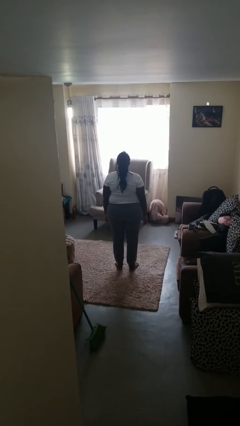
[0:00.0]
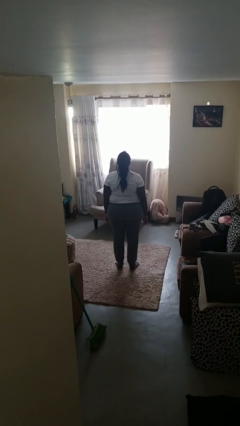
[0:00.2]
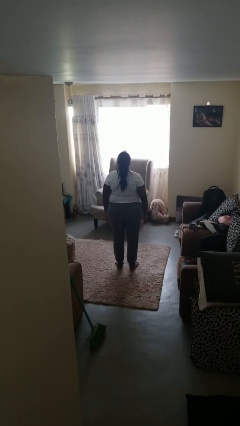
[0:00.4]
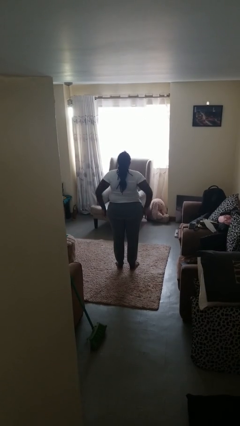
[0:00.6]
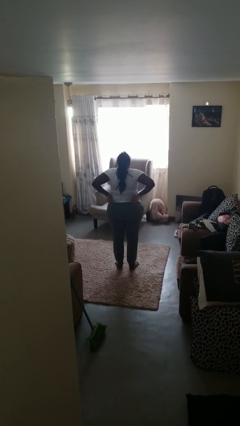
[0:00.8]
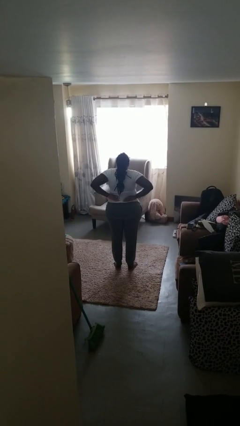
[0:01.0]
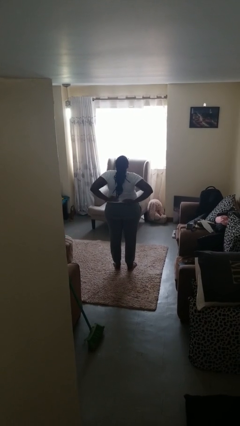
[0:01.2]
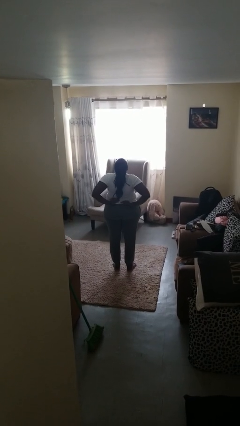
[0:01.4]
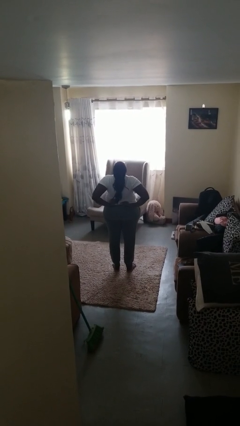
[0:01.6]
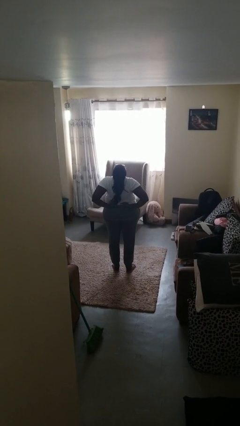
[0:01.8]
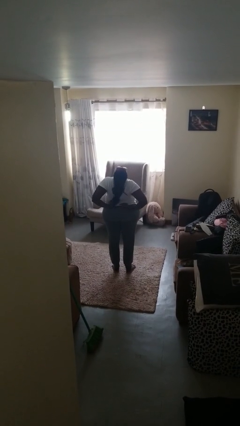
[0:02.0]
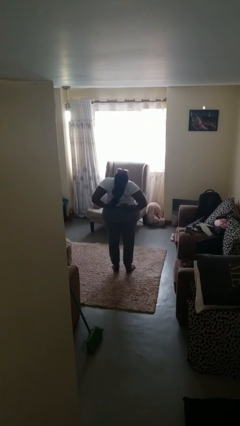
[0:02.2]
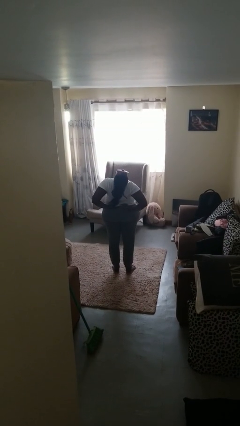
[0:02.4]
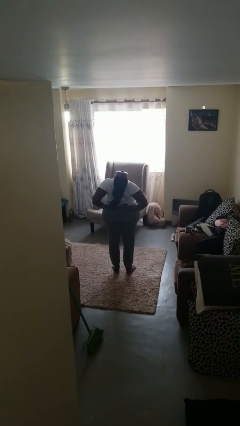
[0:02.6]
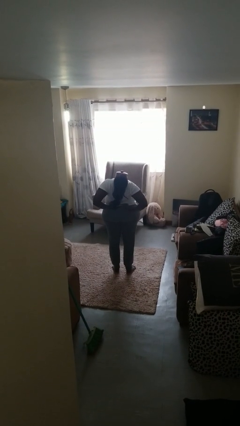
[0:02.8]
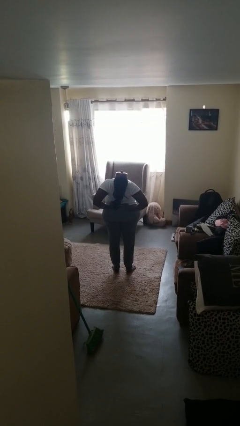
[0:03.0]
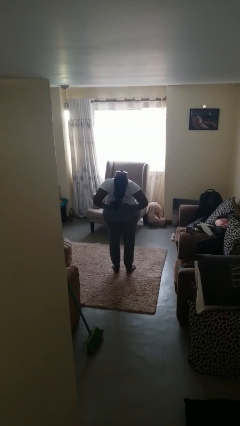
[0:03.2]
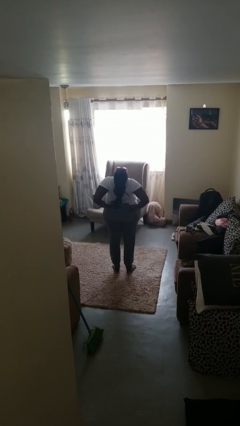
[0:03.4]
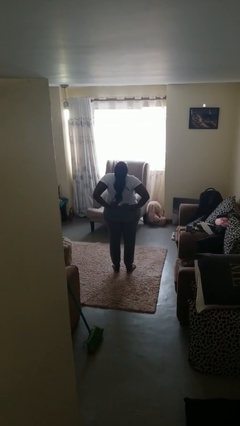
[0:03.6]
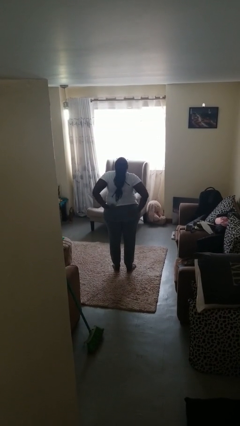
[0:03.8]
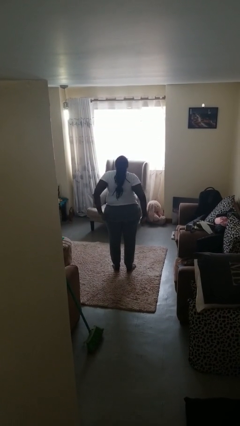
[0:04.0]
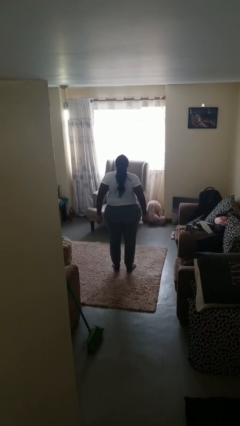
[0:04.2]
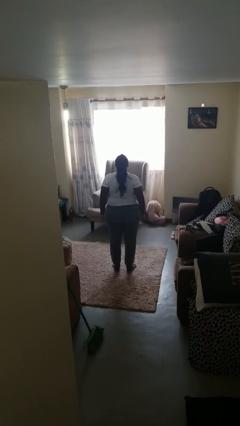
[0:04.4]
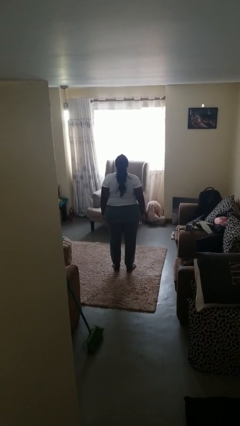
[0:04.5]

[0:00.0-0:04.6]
person stretches back

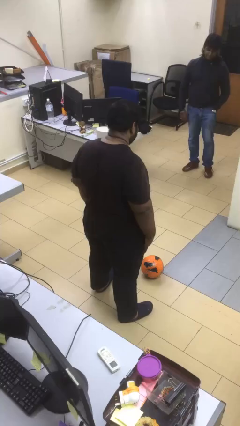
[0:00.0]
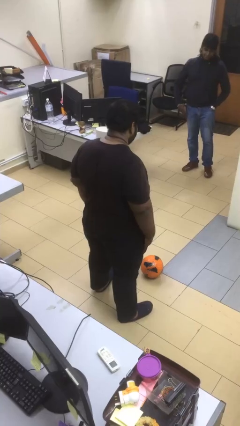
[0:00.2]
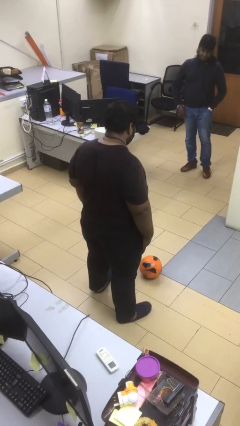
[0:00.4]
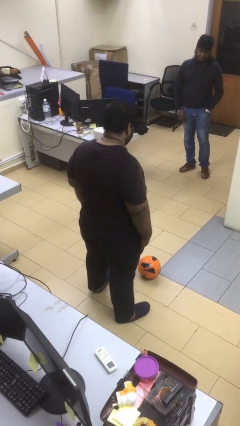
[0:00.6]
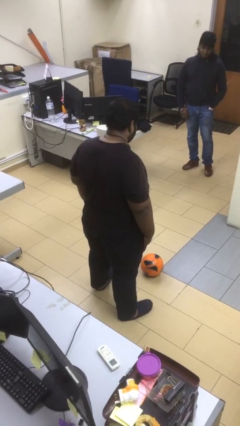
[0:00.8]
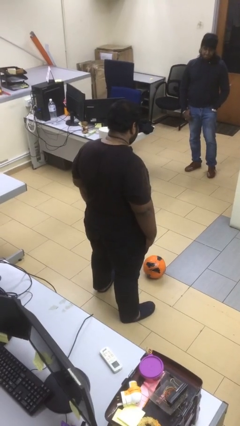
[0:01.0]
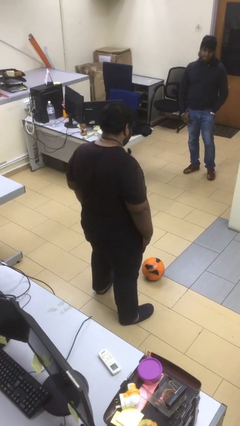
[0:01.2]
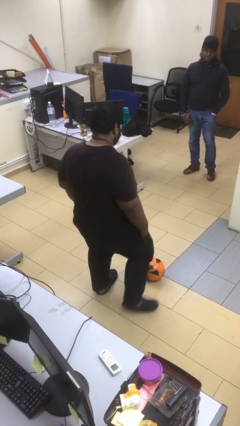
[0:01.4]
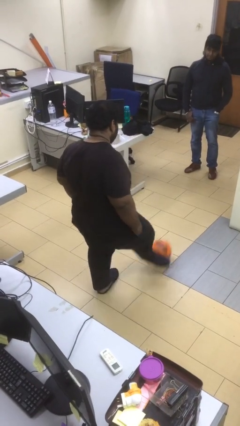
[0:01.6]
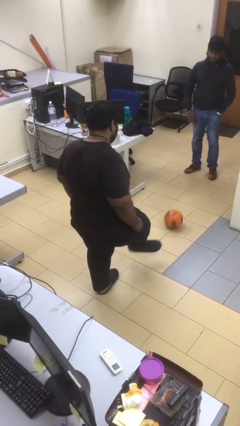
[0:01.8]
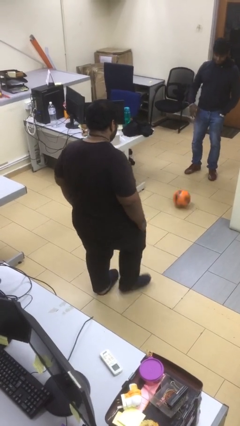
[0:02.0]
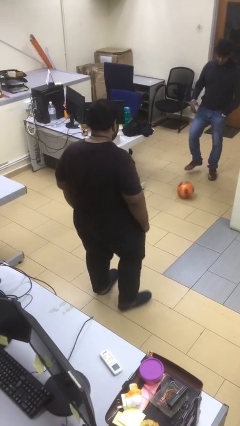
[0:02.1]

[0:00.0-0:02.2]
person kicks object to person

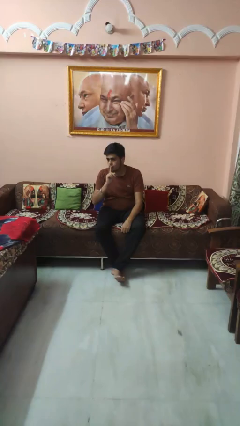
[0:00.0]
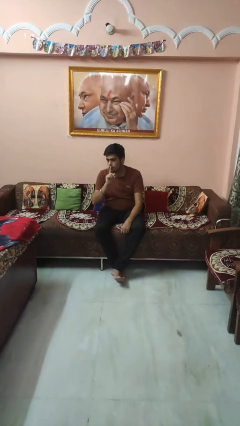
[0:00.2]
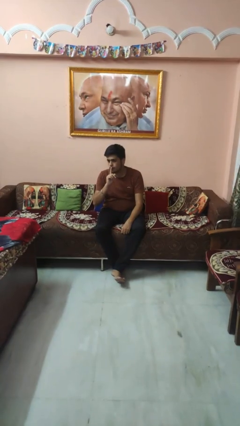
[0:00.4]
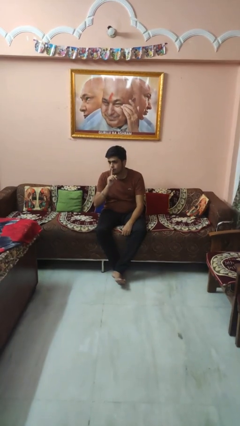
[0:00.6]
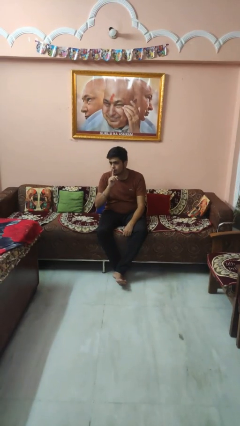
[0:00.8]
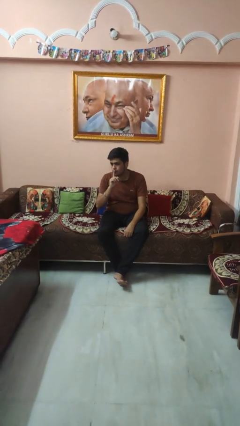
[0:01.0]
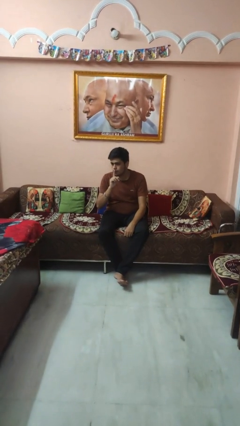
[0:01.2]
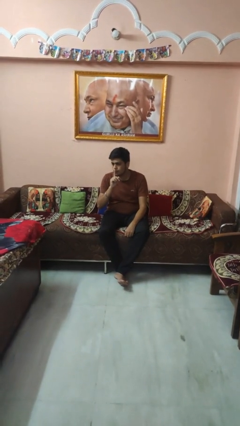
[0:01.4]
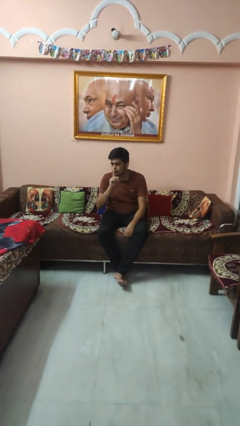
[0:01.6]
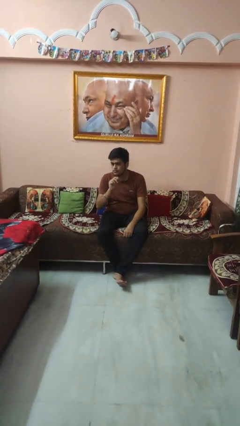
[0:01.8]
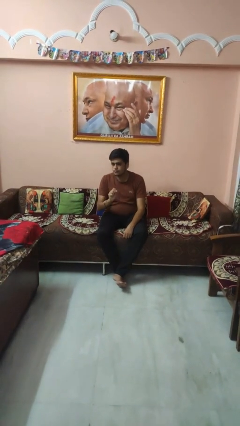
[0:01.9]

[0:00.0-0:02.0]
person gestures be quiet

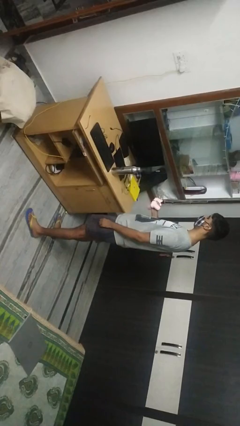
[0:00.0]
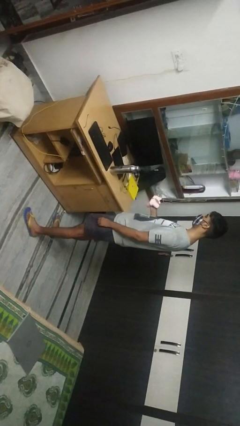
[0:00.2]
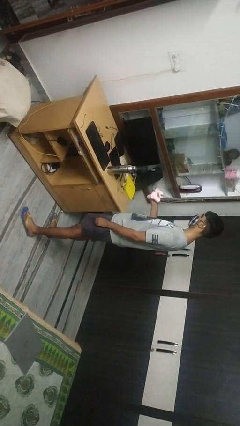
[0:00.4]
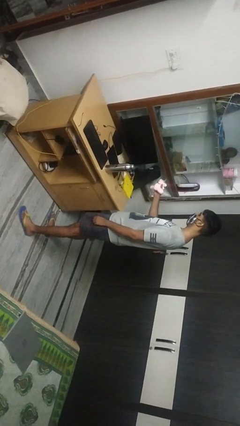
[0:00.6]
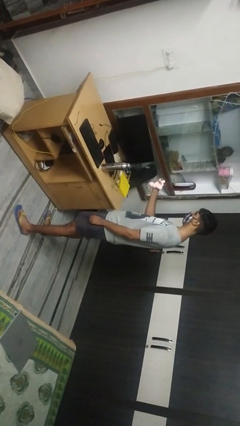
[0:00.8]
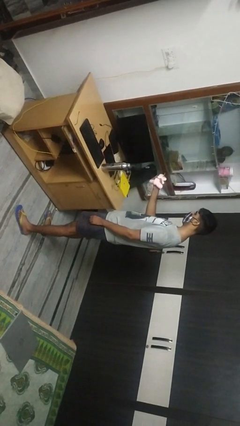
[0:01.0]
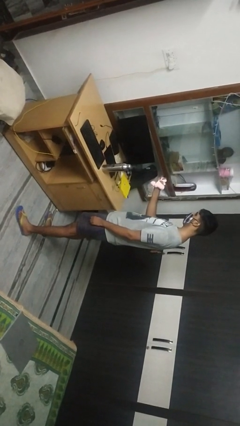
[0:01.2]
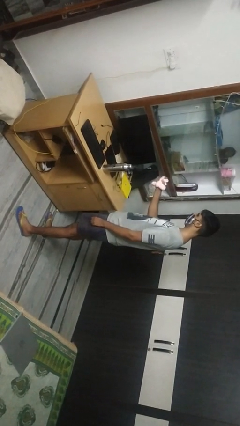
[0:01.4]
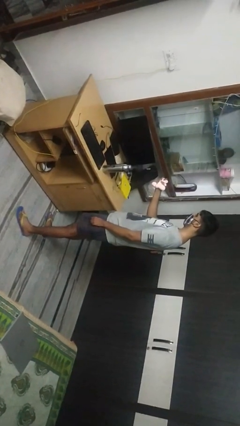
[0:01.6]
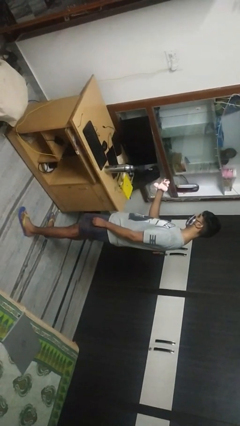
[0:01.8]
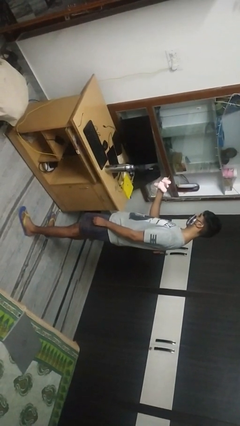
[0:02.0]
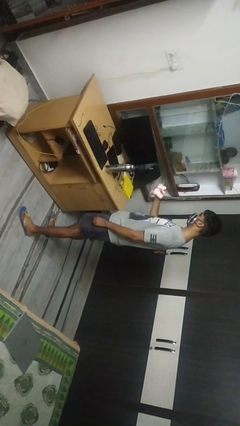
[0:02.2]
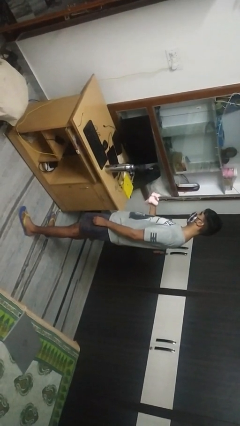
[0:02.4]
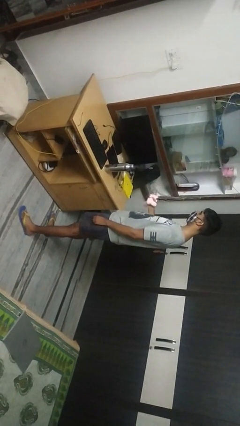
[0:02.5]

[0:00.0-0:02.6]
person squeezes object

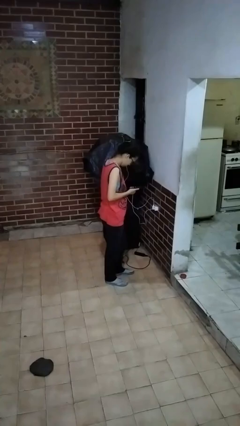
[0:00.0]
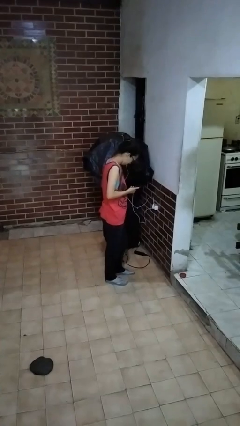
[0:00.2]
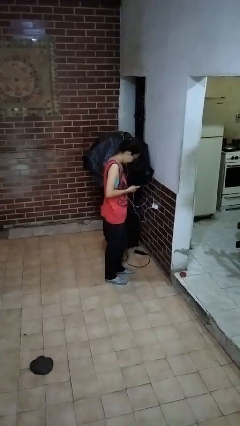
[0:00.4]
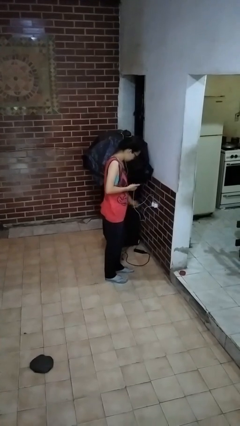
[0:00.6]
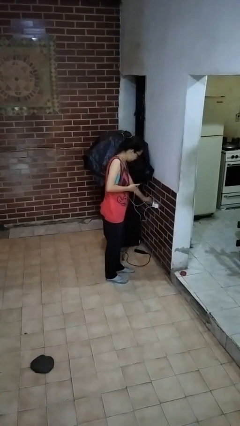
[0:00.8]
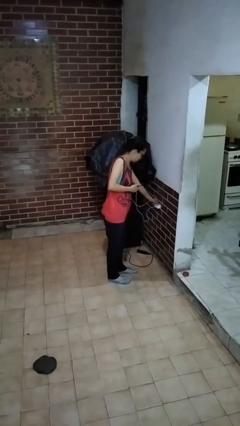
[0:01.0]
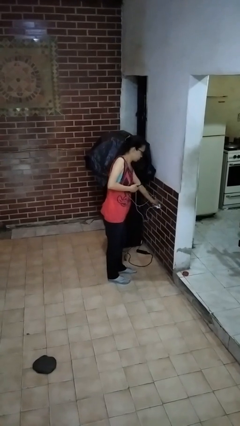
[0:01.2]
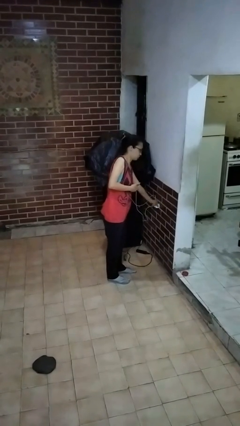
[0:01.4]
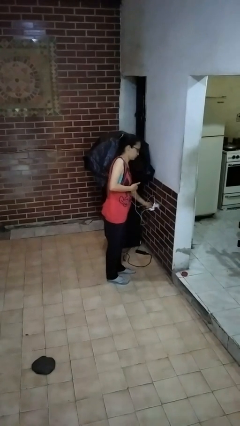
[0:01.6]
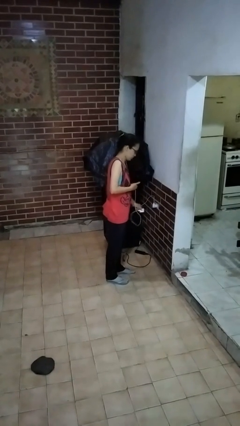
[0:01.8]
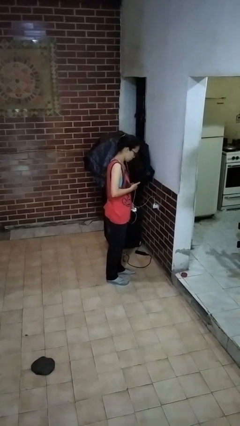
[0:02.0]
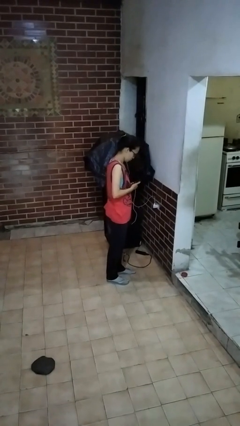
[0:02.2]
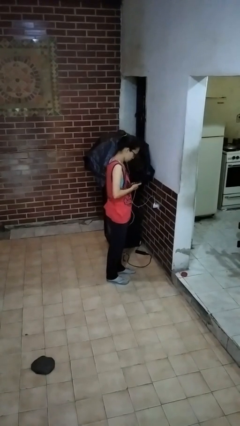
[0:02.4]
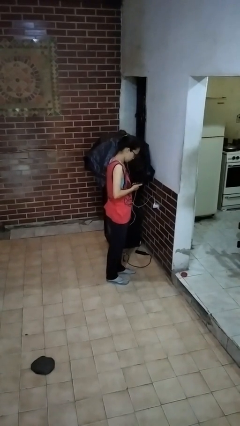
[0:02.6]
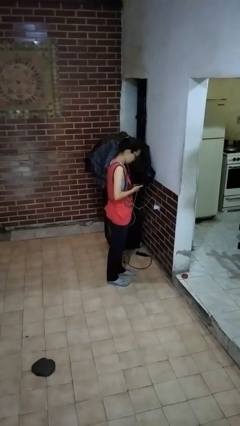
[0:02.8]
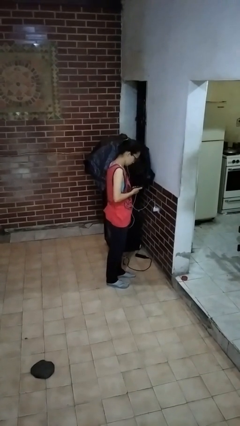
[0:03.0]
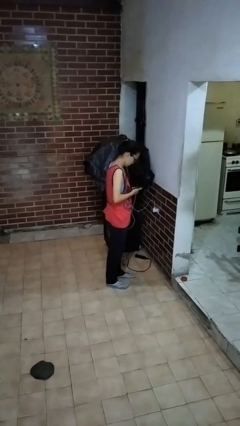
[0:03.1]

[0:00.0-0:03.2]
person unplugs from electrical socket

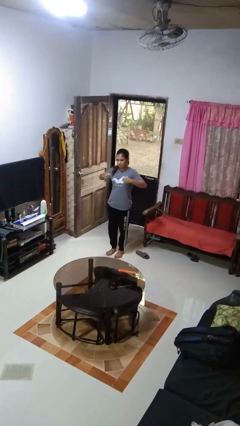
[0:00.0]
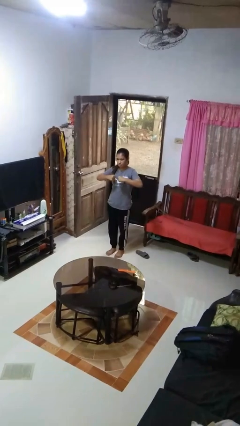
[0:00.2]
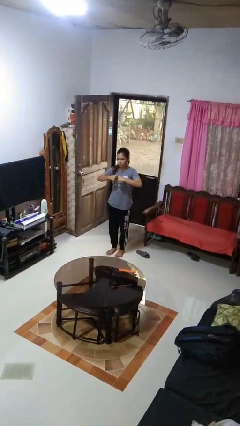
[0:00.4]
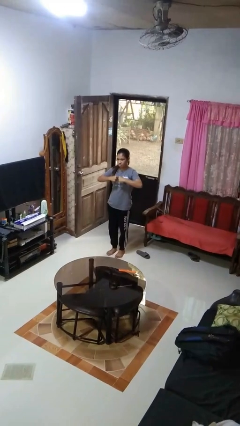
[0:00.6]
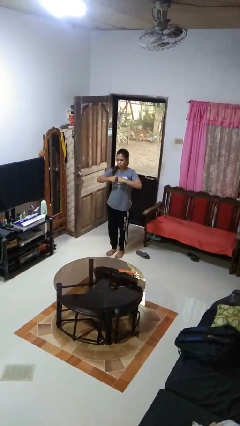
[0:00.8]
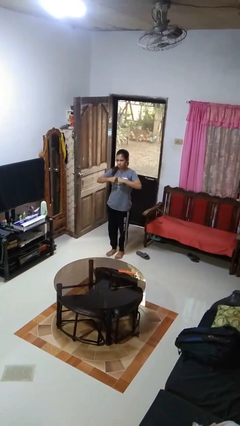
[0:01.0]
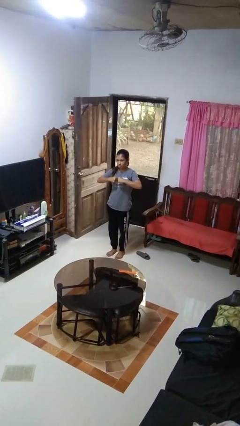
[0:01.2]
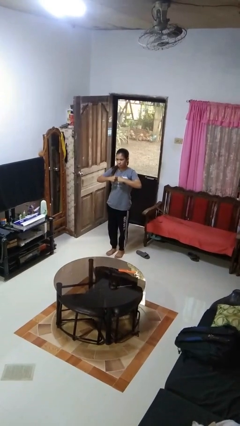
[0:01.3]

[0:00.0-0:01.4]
person gestures zoom out

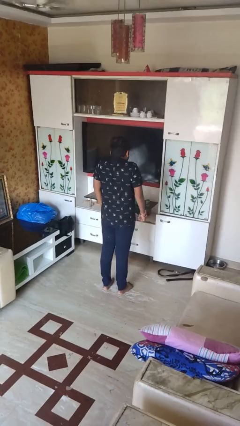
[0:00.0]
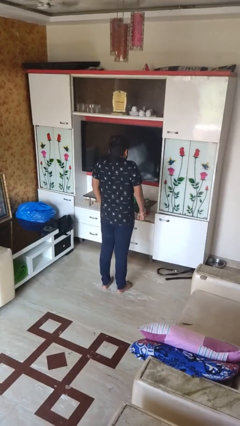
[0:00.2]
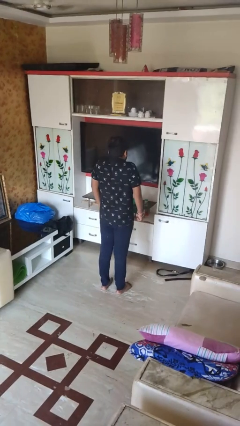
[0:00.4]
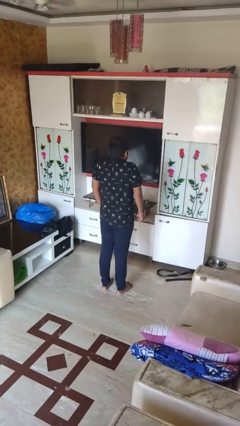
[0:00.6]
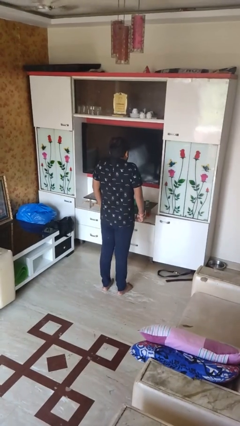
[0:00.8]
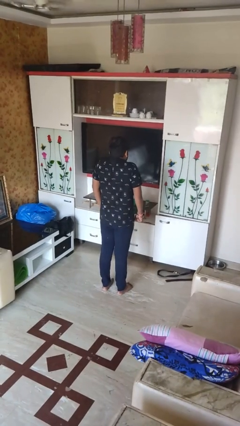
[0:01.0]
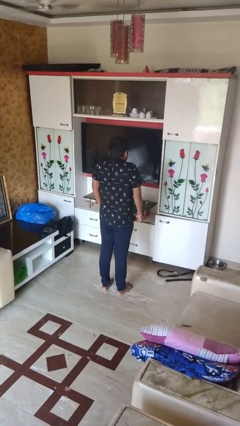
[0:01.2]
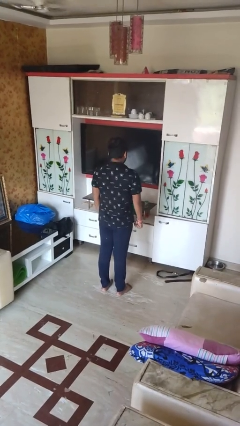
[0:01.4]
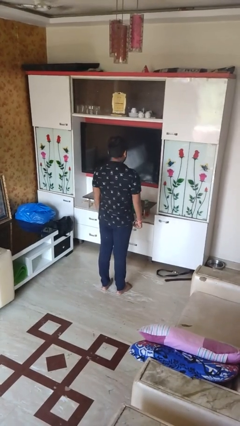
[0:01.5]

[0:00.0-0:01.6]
person shrugs
